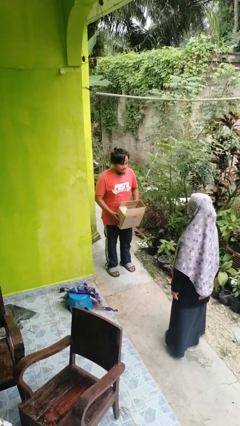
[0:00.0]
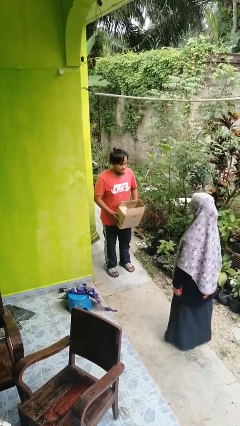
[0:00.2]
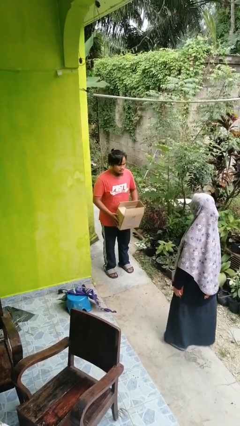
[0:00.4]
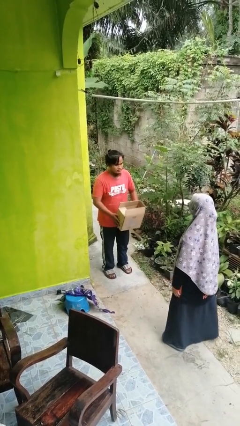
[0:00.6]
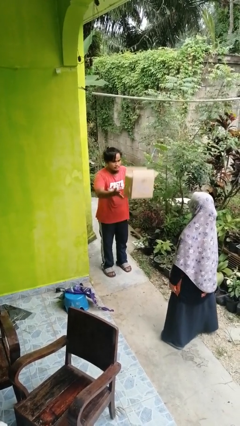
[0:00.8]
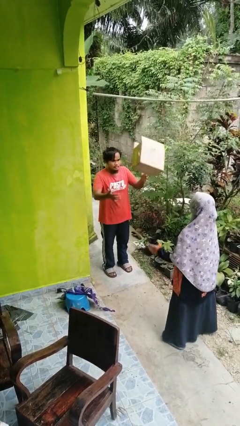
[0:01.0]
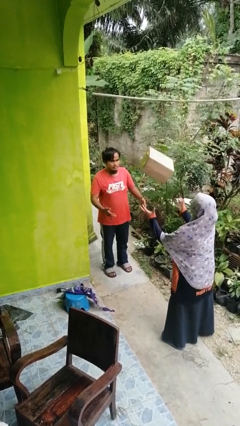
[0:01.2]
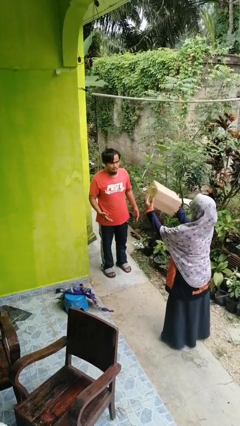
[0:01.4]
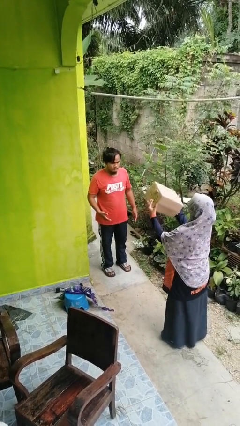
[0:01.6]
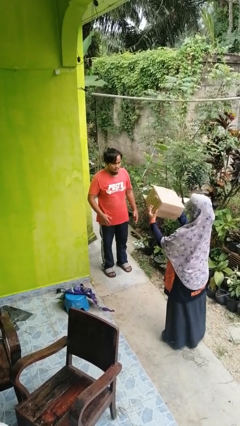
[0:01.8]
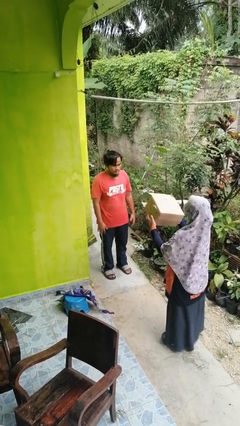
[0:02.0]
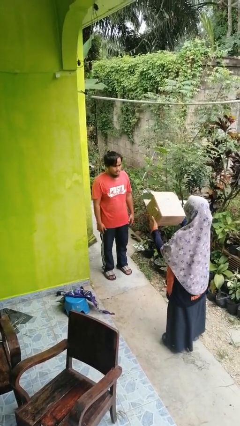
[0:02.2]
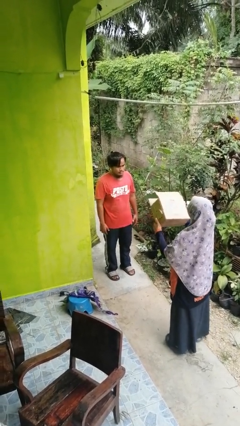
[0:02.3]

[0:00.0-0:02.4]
person throws object to person

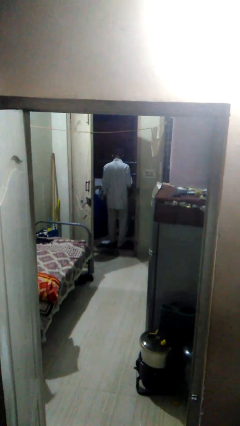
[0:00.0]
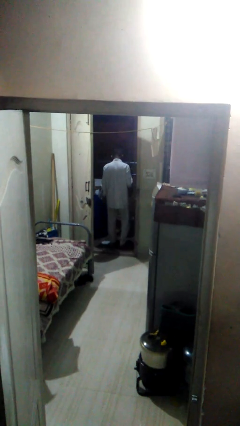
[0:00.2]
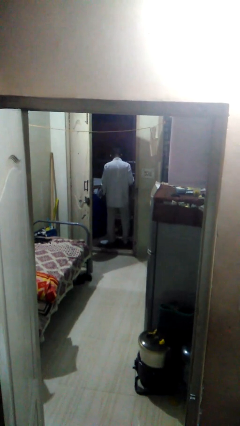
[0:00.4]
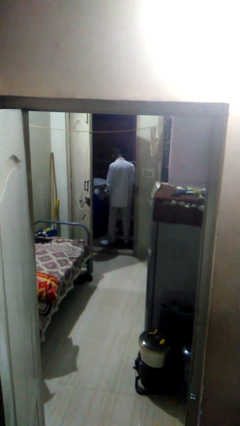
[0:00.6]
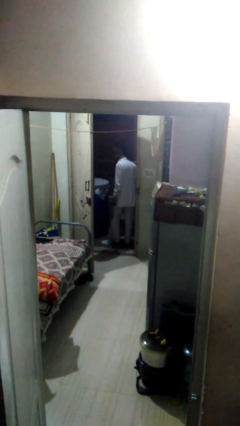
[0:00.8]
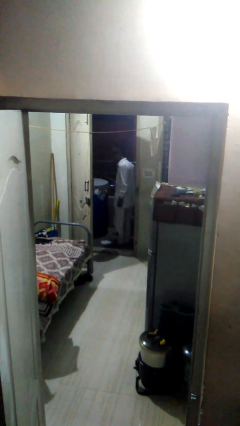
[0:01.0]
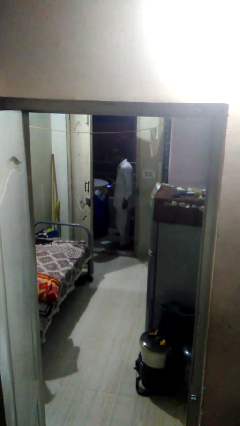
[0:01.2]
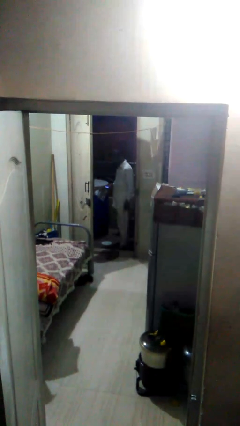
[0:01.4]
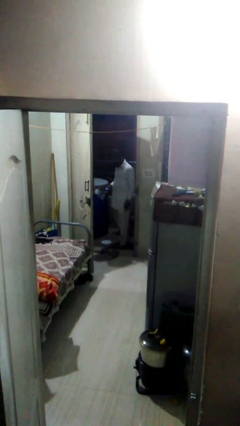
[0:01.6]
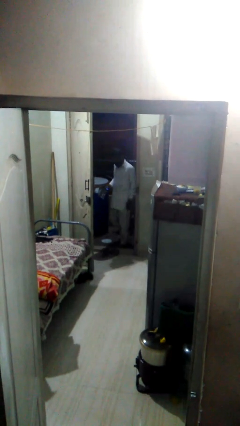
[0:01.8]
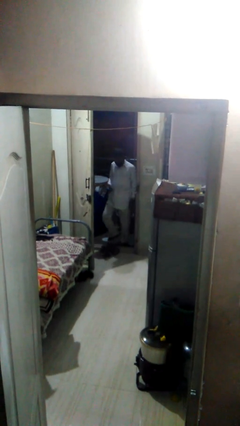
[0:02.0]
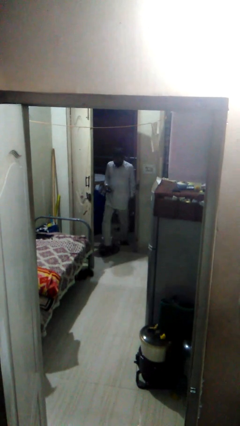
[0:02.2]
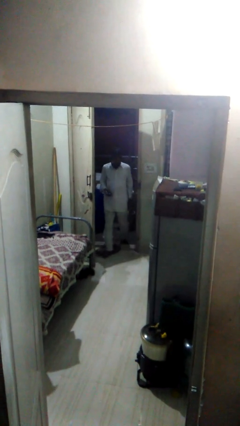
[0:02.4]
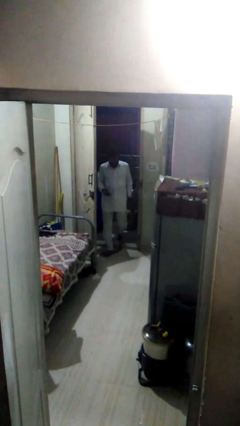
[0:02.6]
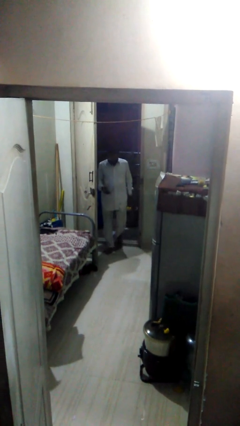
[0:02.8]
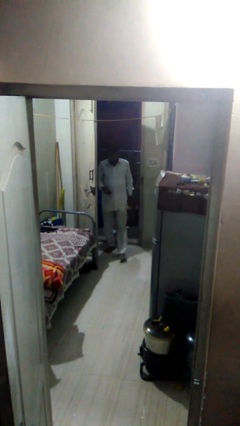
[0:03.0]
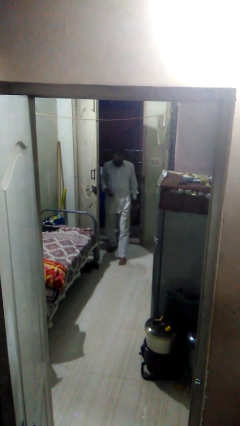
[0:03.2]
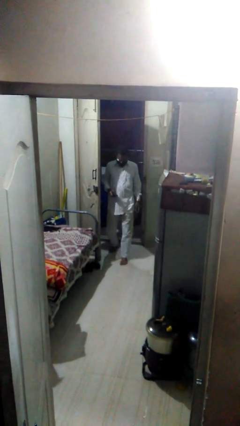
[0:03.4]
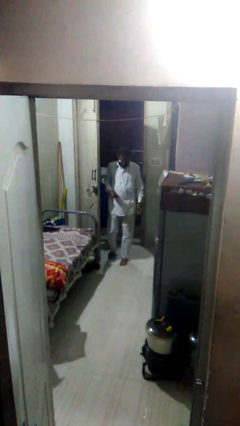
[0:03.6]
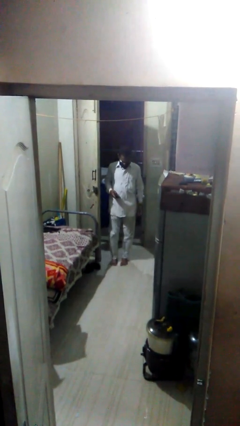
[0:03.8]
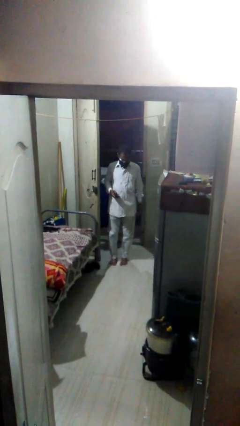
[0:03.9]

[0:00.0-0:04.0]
person enters scene through structure

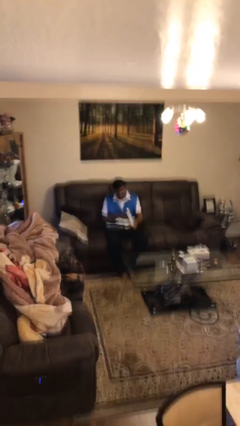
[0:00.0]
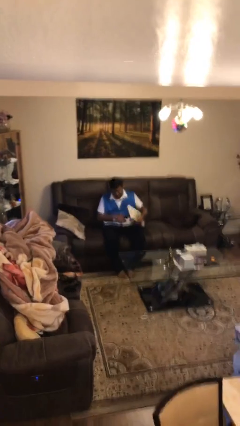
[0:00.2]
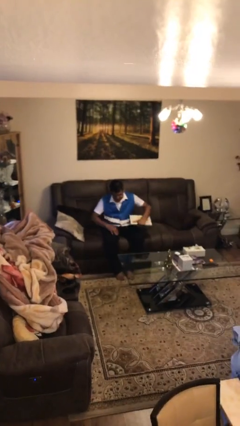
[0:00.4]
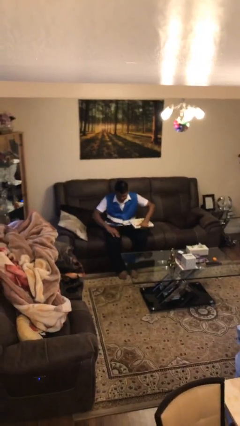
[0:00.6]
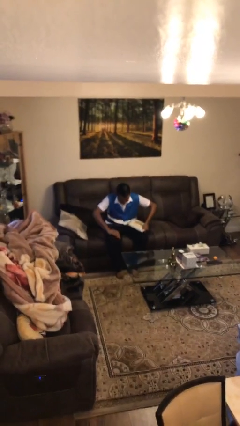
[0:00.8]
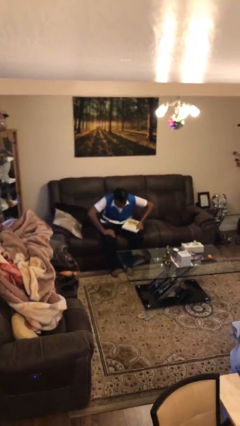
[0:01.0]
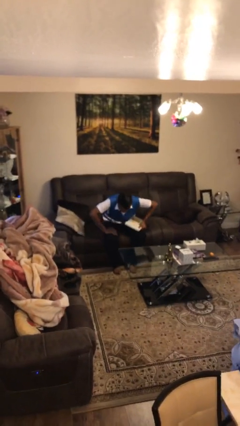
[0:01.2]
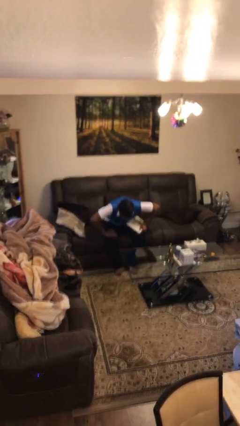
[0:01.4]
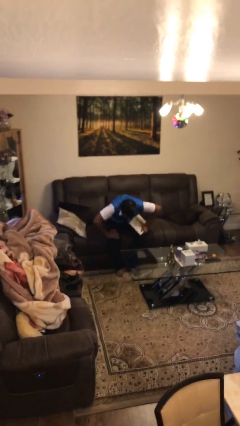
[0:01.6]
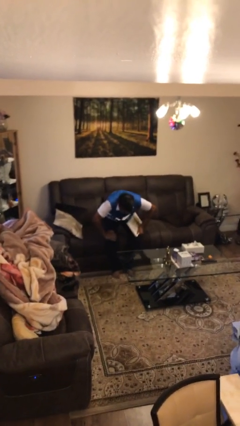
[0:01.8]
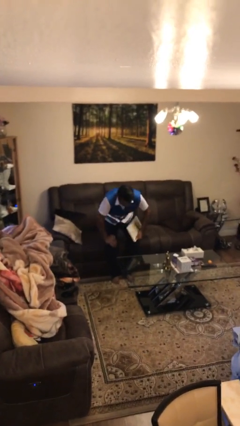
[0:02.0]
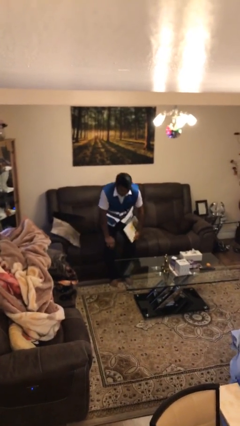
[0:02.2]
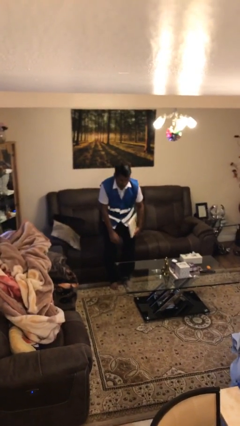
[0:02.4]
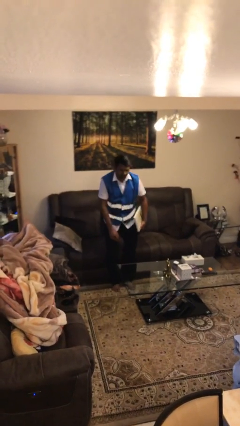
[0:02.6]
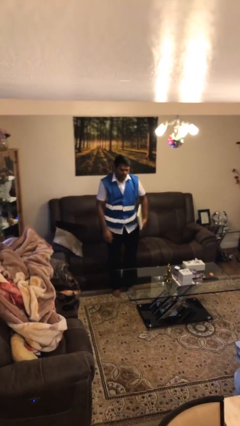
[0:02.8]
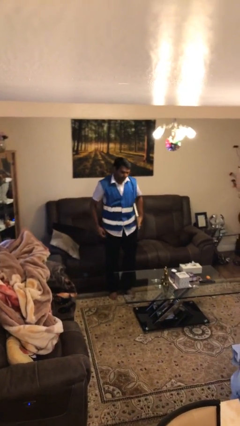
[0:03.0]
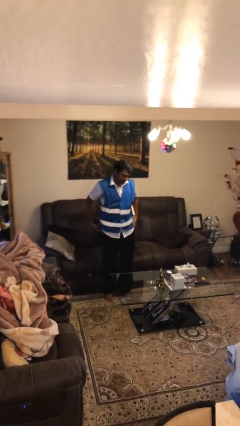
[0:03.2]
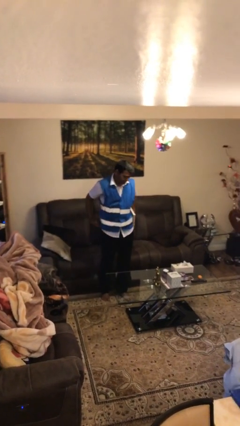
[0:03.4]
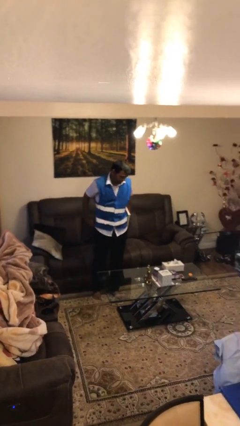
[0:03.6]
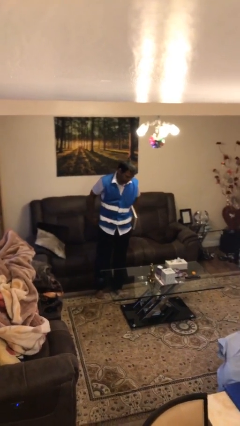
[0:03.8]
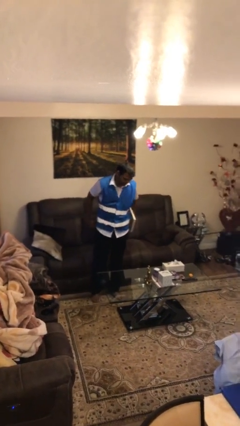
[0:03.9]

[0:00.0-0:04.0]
person stands up

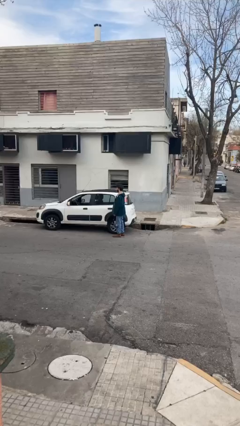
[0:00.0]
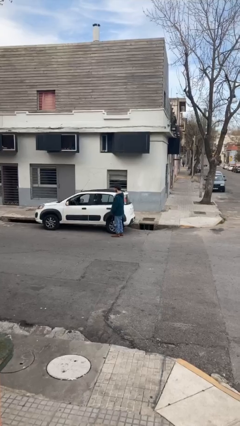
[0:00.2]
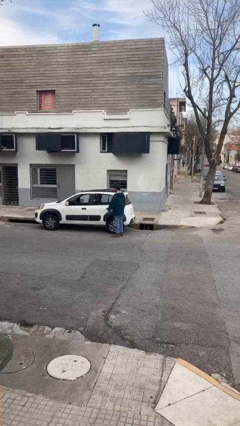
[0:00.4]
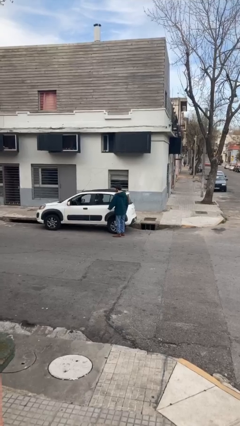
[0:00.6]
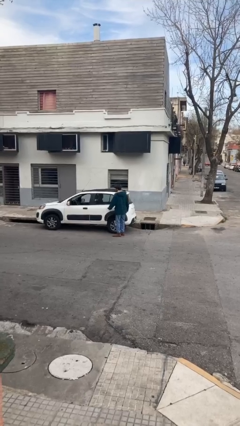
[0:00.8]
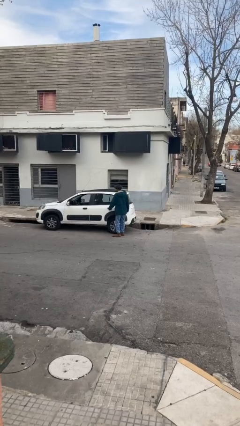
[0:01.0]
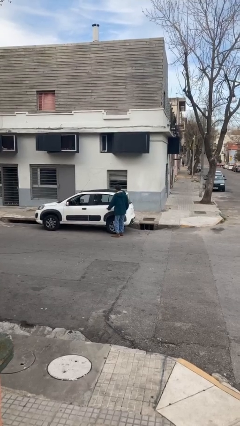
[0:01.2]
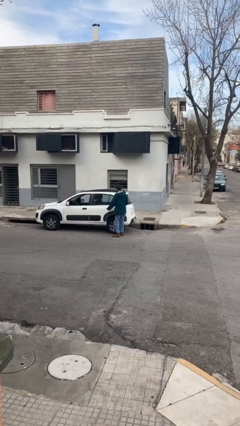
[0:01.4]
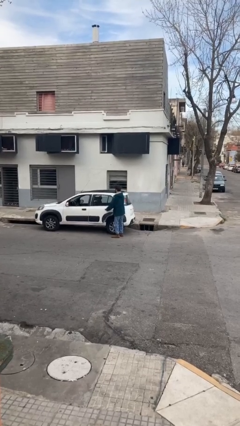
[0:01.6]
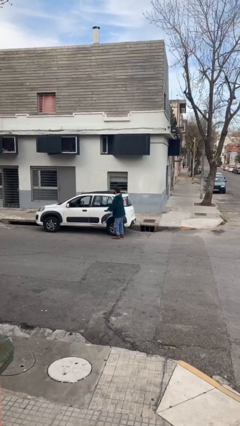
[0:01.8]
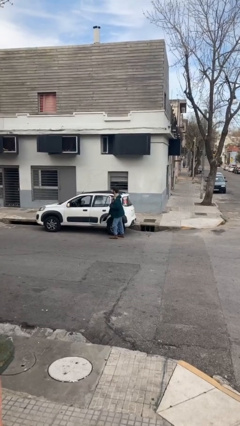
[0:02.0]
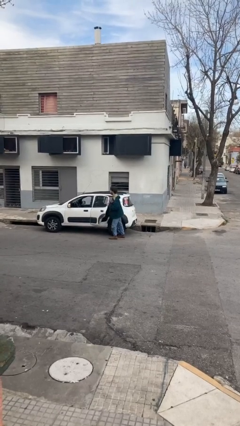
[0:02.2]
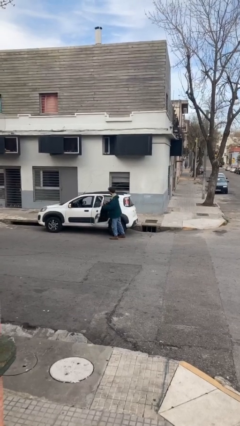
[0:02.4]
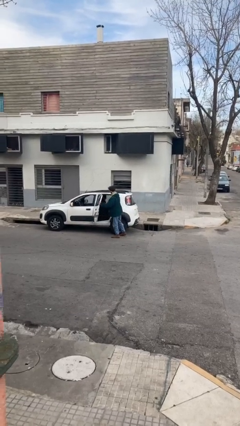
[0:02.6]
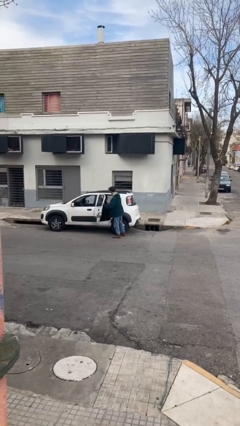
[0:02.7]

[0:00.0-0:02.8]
person opens car door

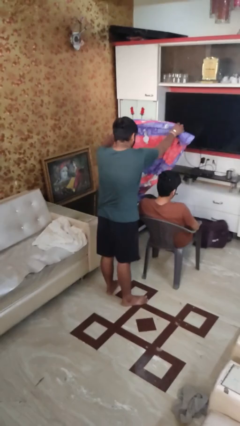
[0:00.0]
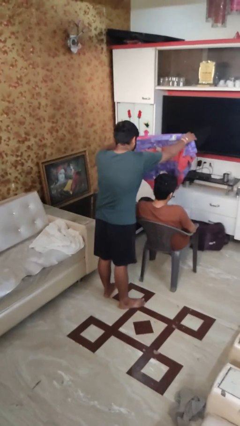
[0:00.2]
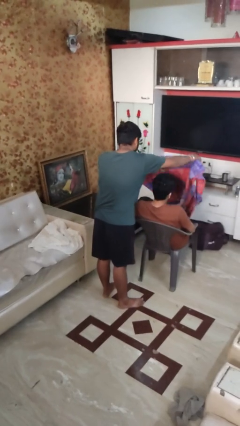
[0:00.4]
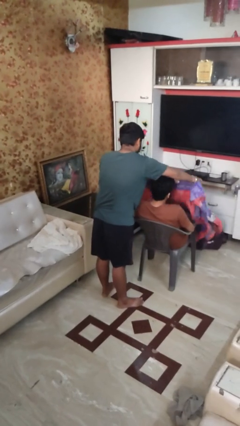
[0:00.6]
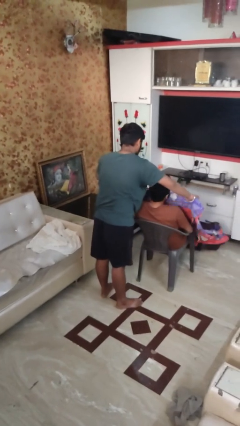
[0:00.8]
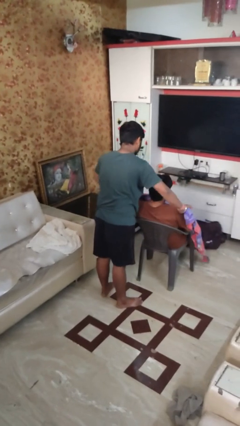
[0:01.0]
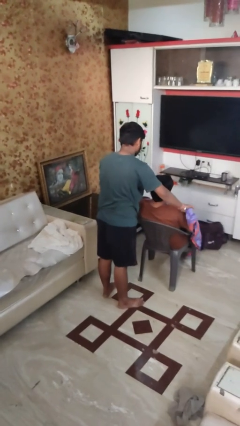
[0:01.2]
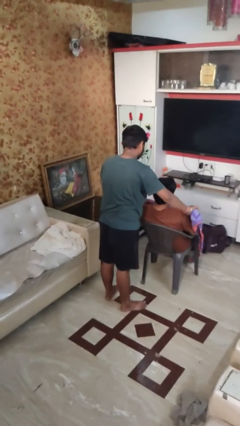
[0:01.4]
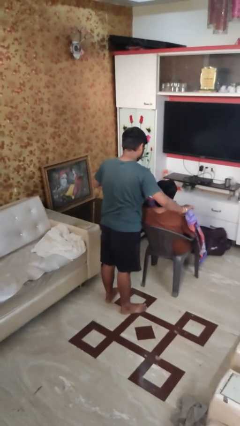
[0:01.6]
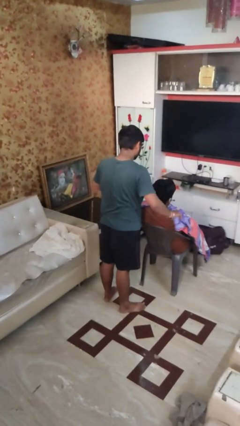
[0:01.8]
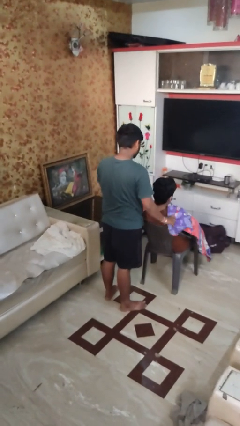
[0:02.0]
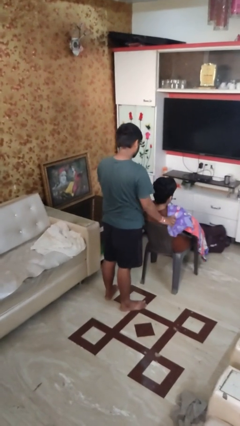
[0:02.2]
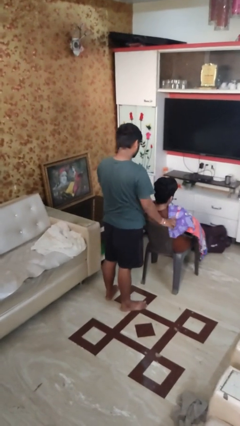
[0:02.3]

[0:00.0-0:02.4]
person covers friend with blanket

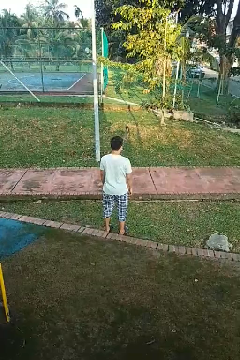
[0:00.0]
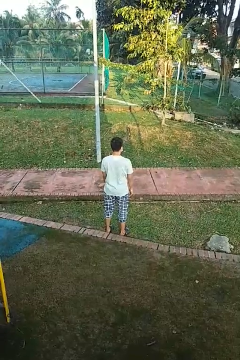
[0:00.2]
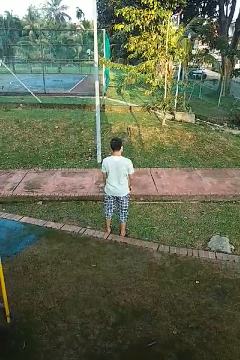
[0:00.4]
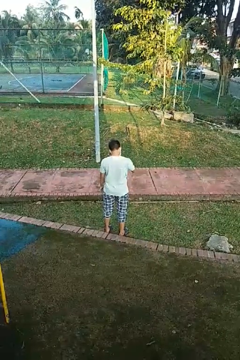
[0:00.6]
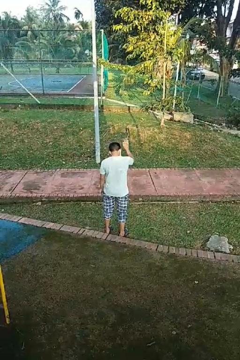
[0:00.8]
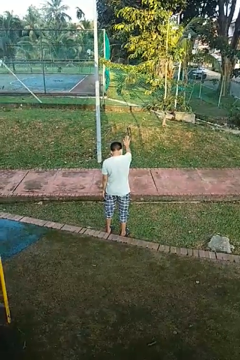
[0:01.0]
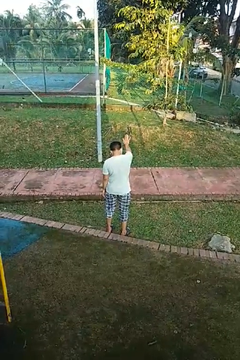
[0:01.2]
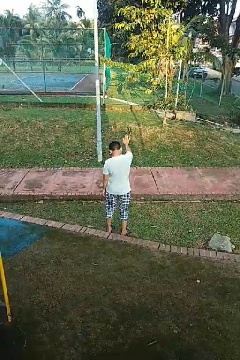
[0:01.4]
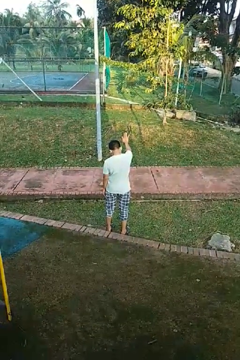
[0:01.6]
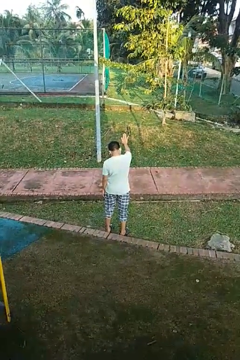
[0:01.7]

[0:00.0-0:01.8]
person gestures stop

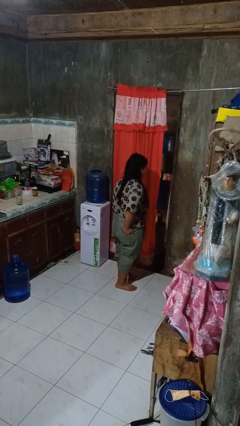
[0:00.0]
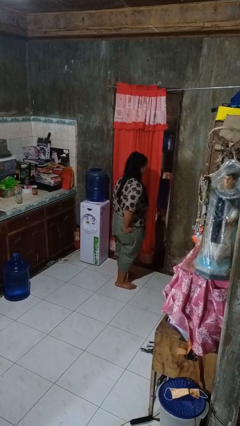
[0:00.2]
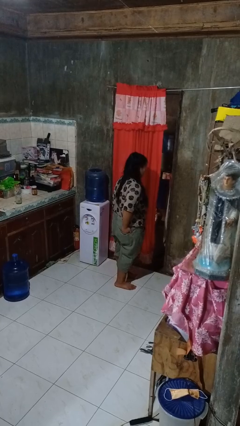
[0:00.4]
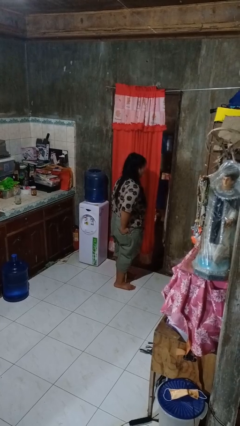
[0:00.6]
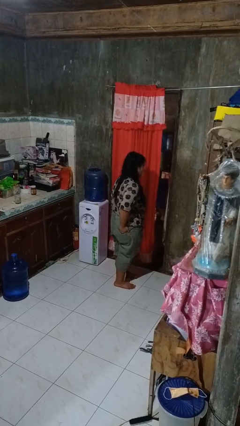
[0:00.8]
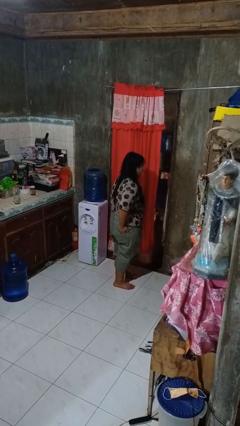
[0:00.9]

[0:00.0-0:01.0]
person puts hands in back pockets
